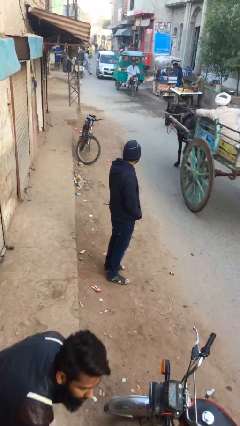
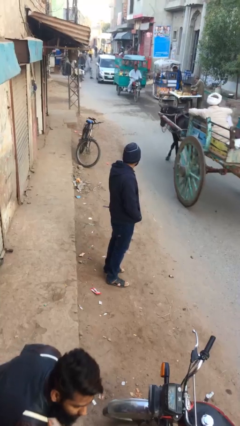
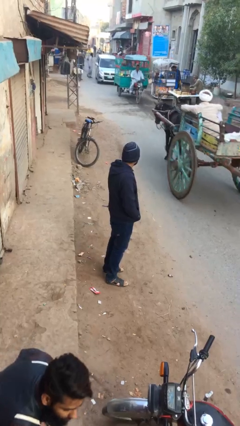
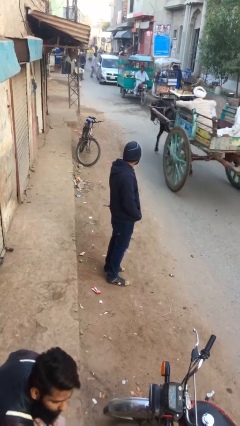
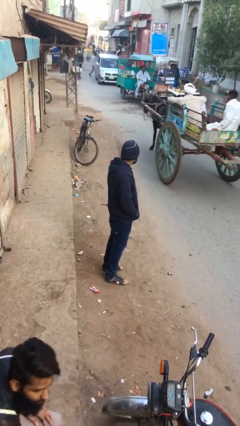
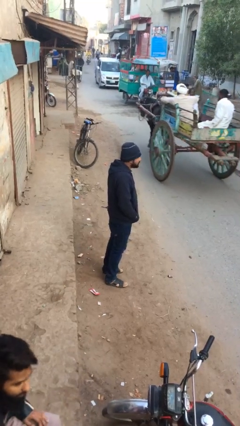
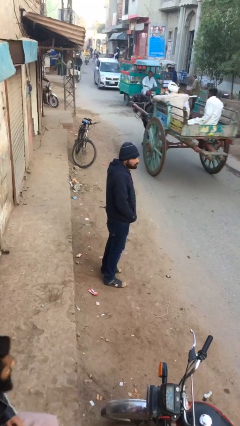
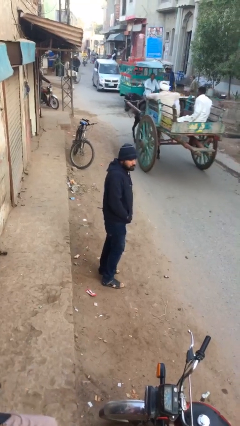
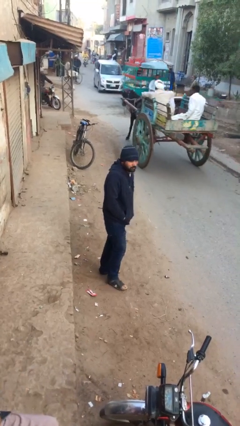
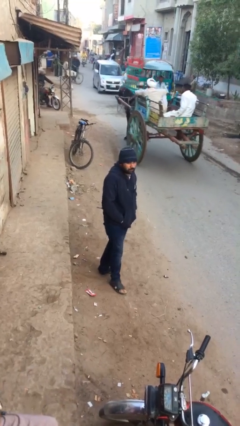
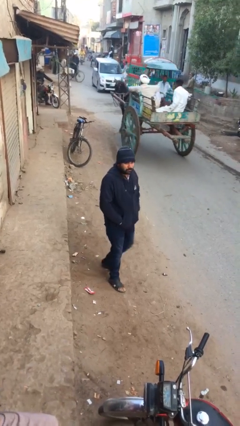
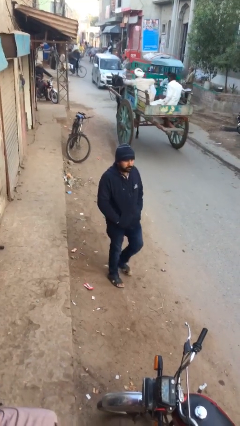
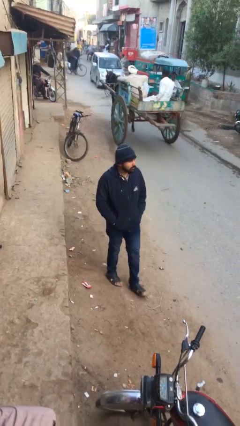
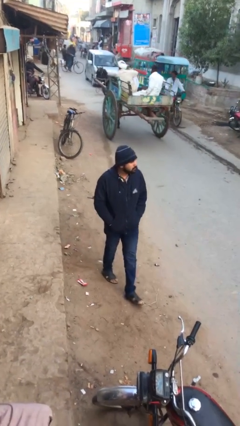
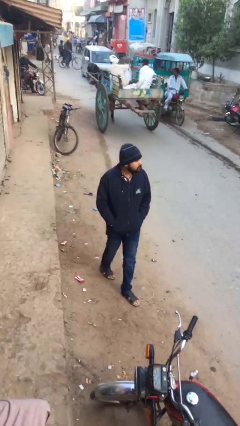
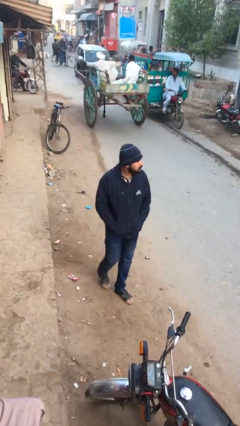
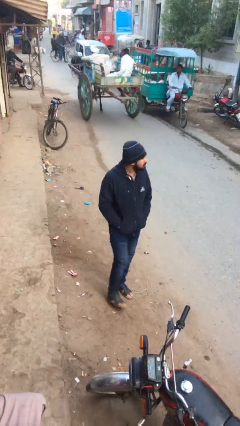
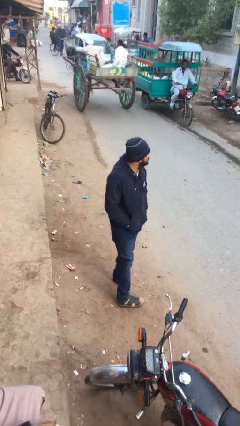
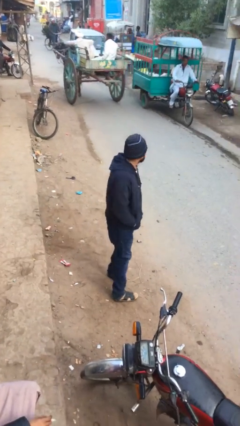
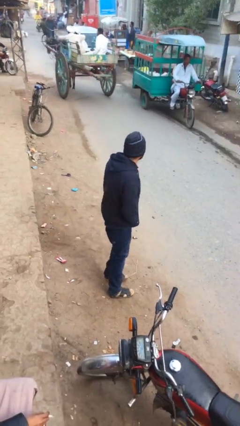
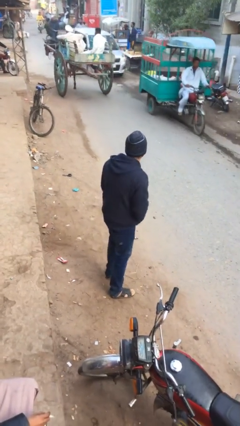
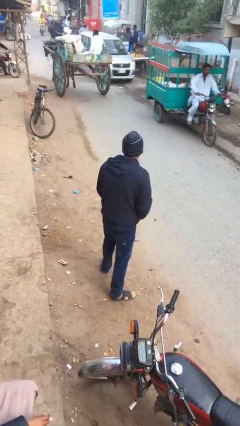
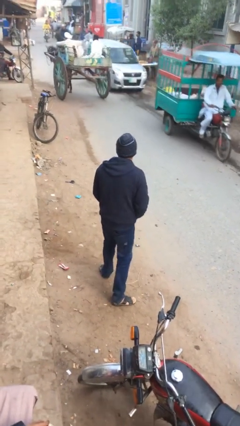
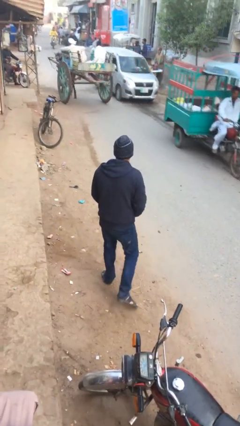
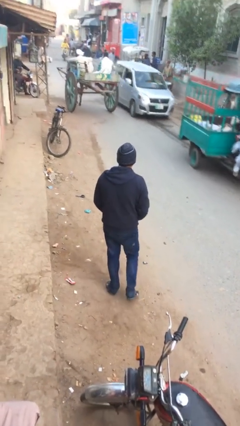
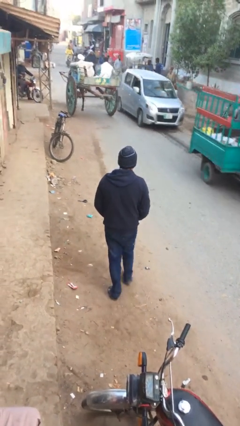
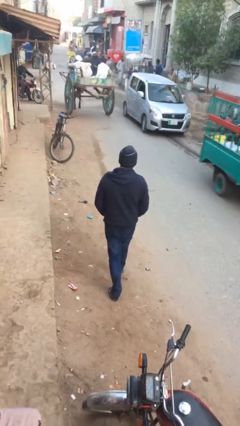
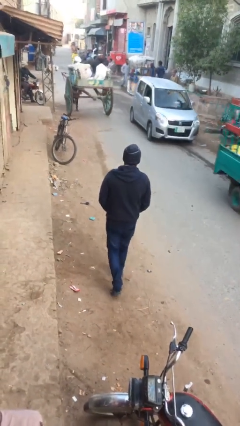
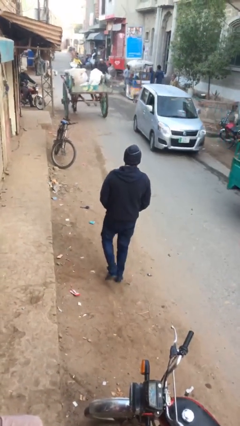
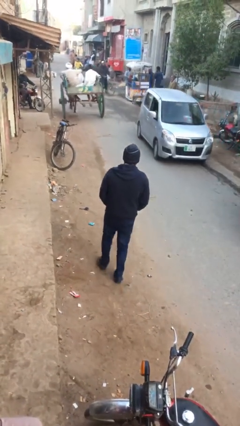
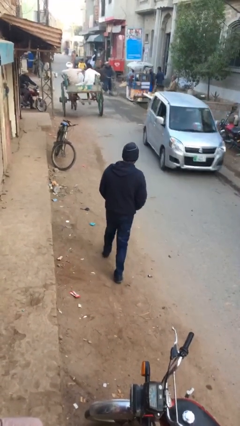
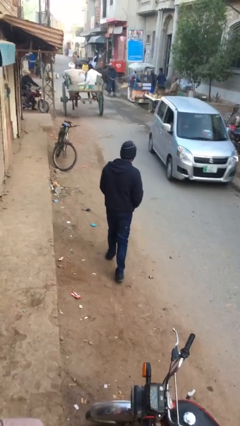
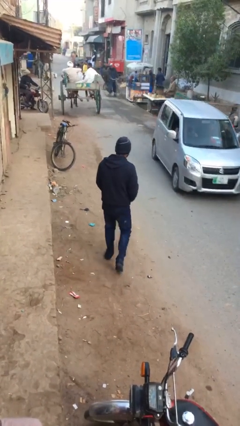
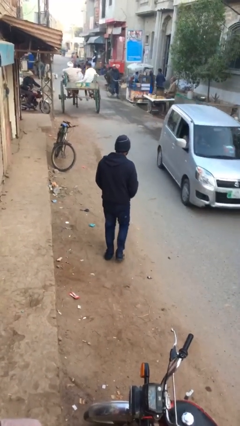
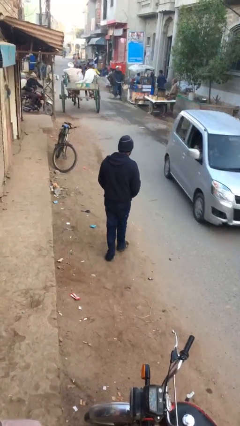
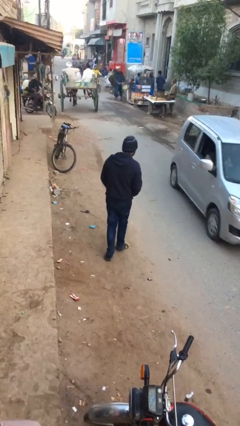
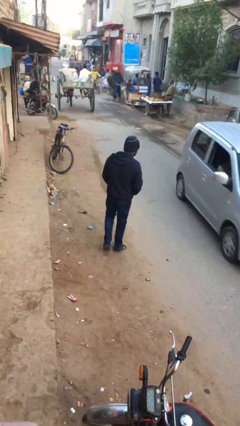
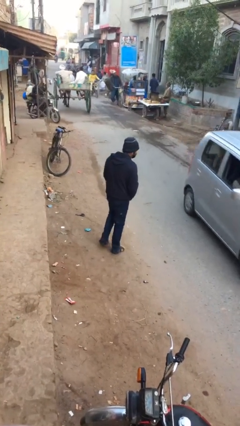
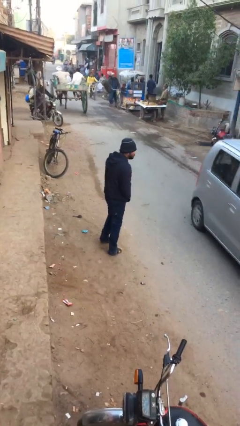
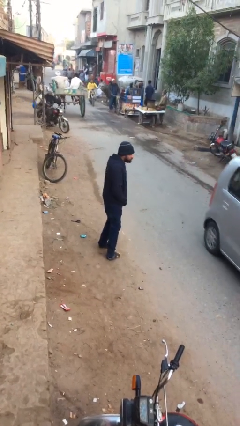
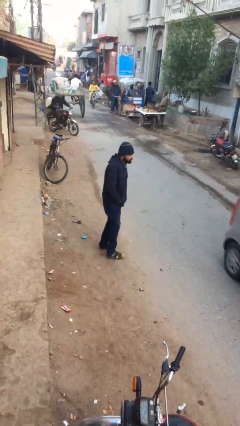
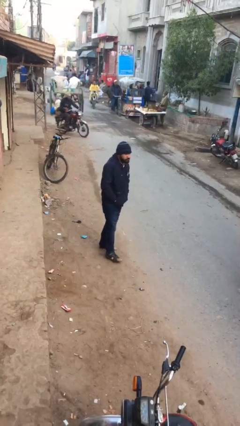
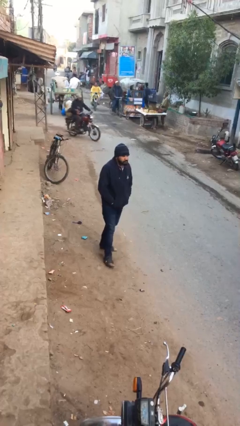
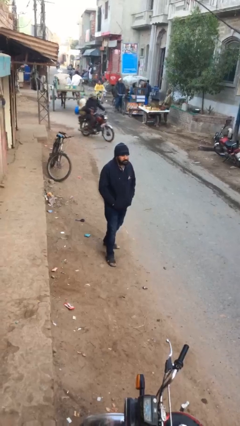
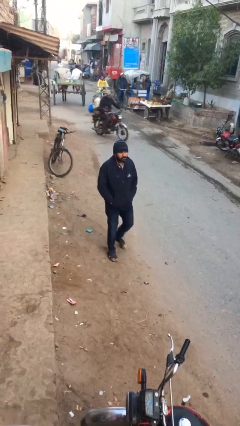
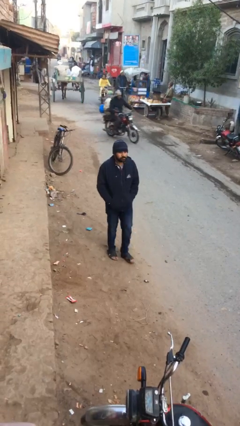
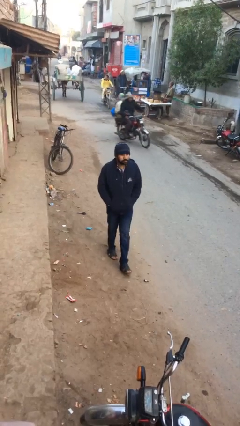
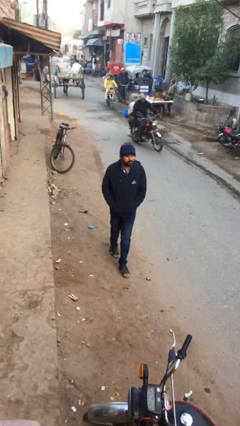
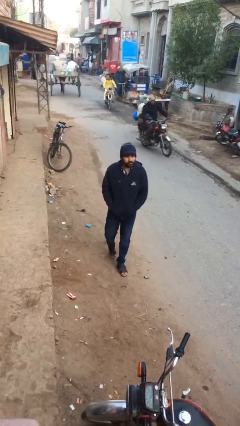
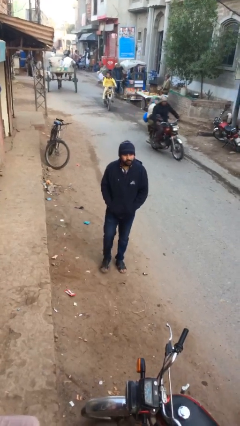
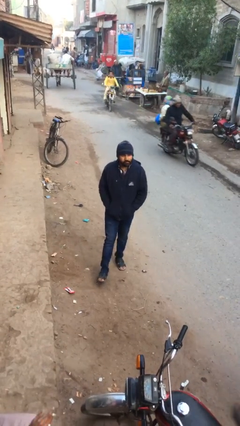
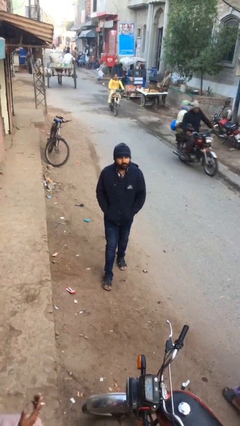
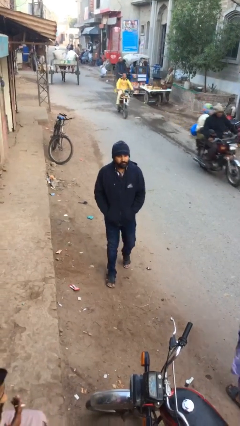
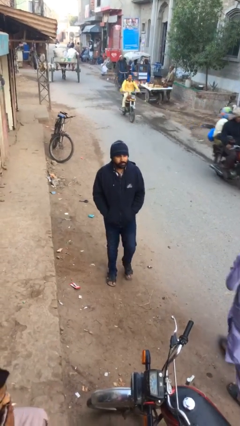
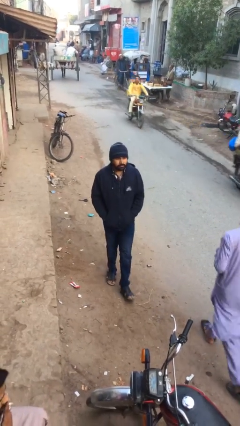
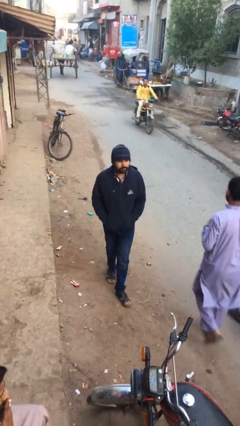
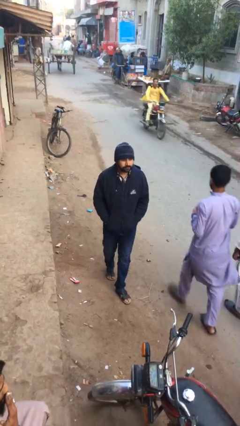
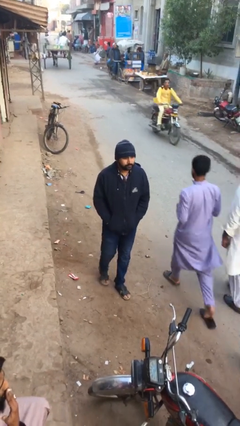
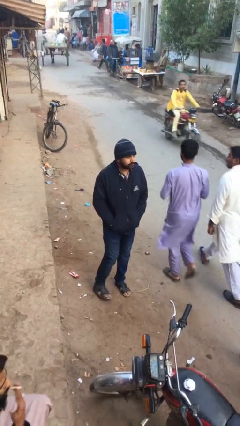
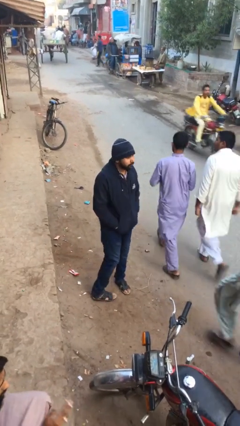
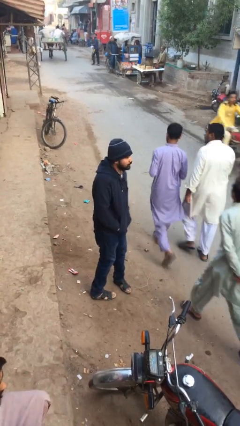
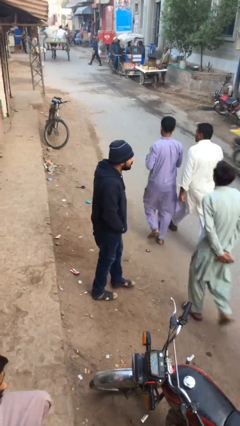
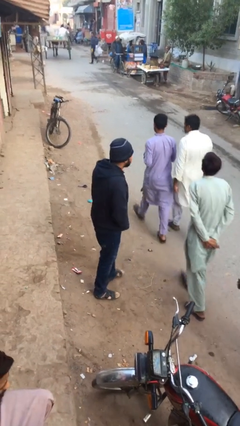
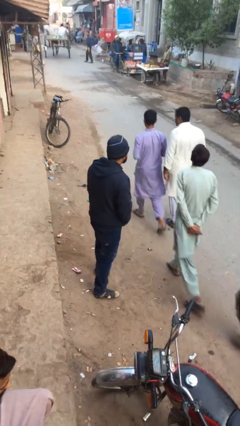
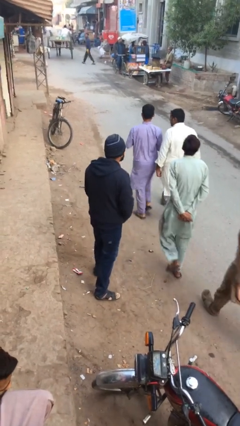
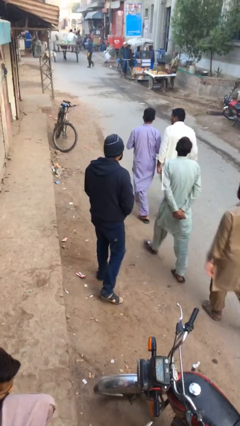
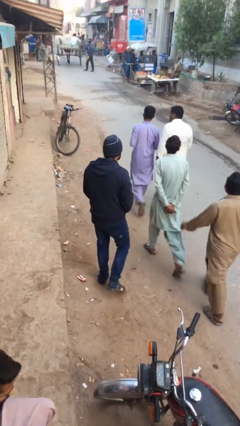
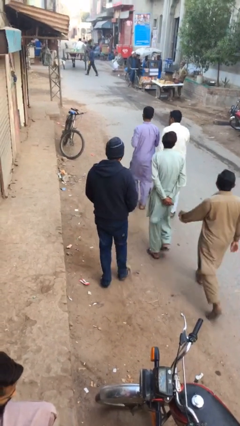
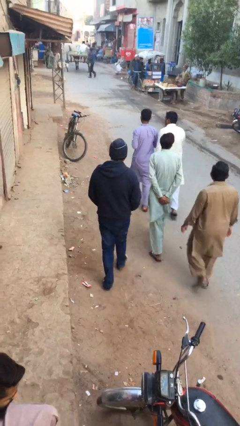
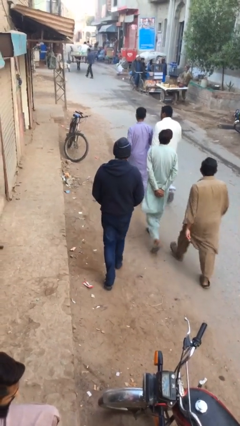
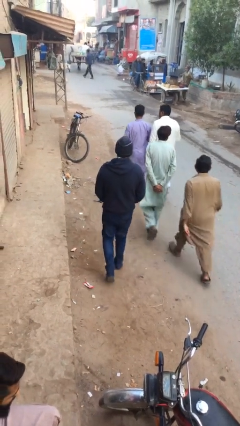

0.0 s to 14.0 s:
person walks

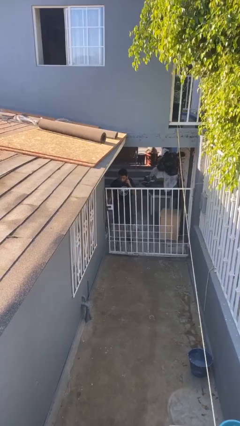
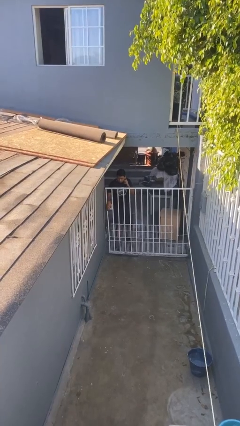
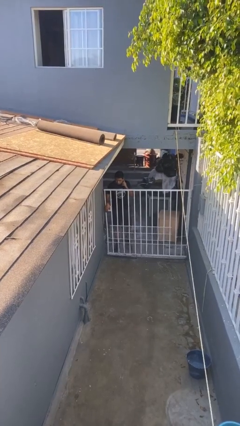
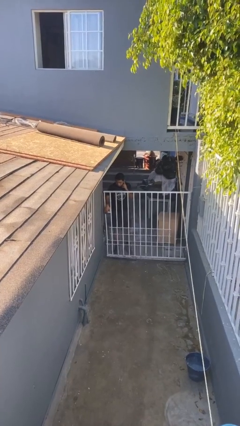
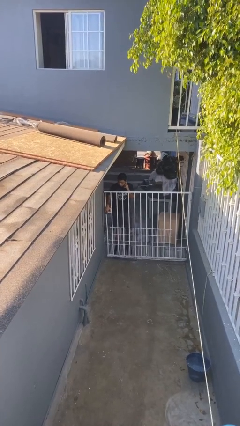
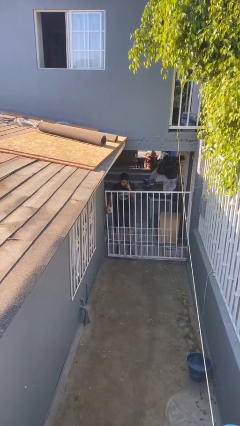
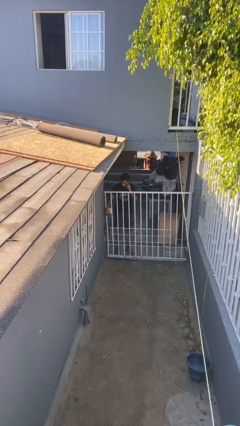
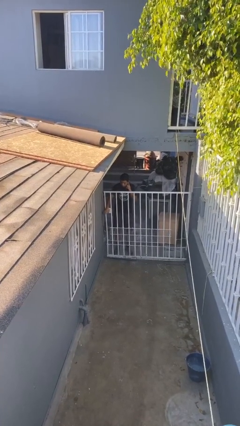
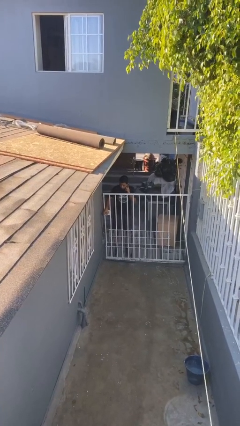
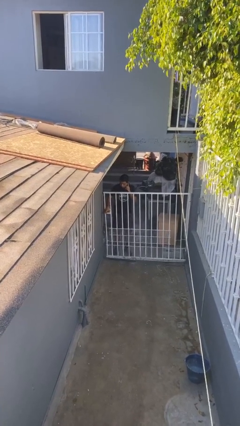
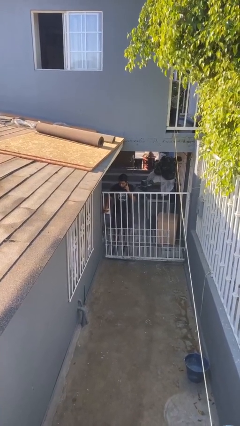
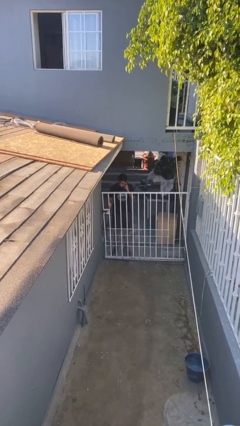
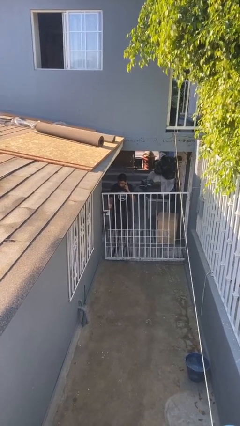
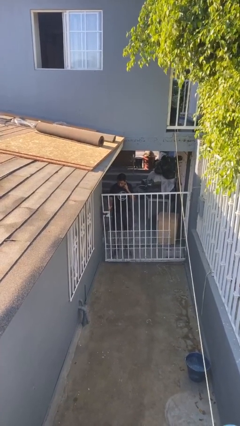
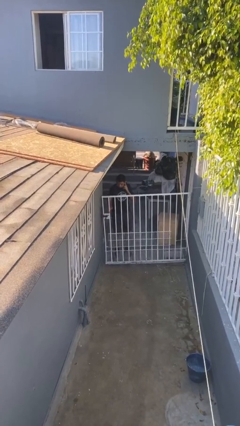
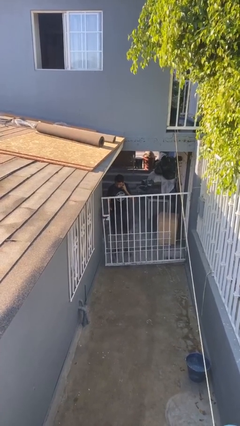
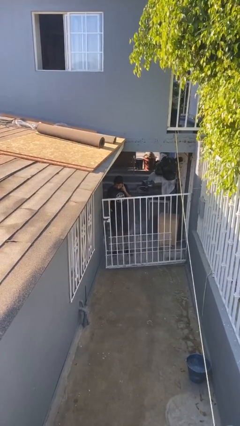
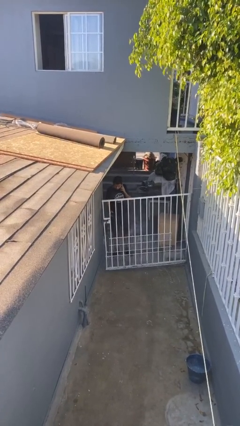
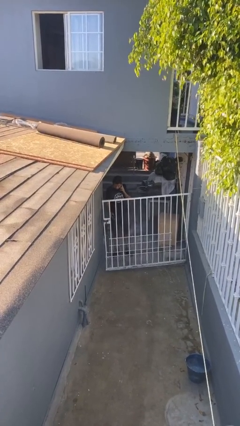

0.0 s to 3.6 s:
person opens facility door
